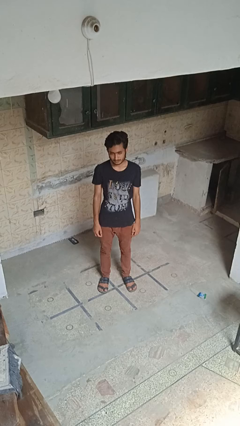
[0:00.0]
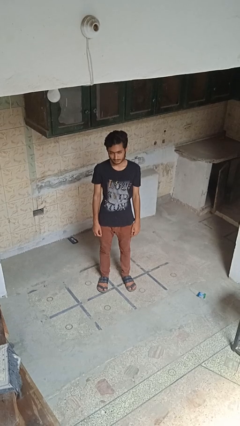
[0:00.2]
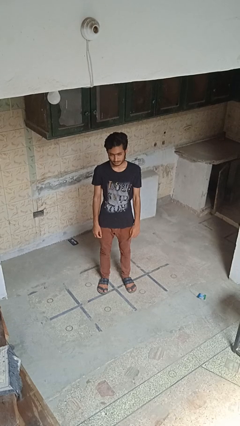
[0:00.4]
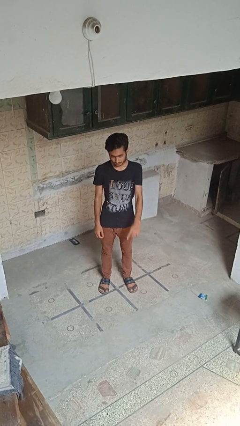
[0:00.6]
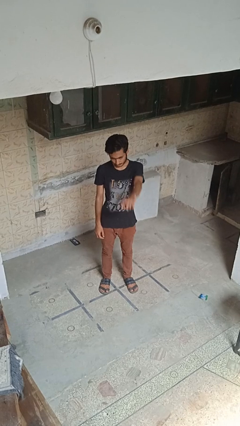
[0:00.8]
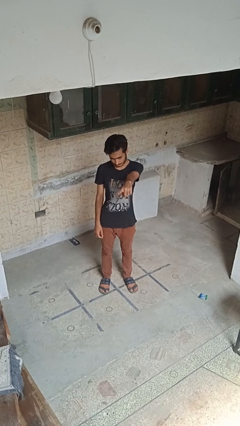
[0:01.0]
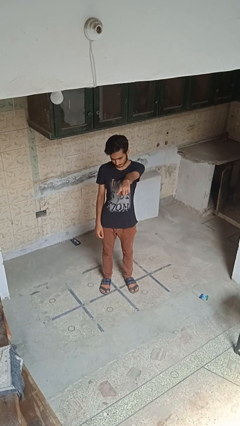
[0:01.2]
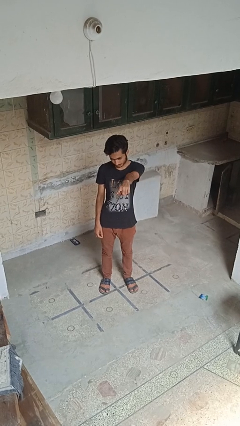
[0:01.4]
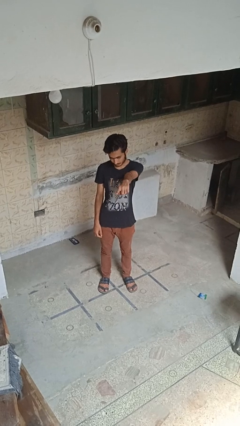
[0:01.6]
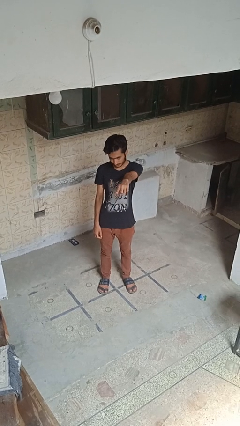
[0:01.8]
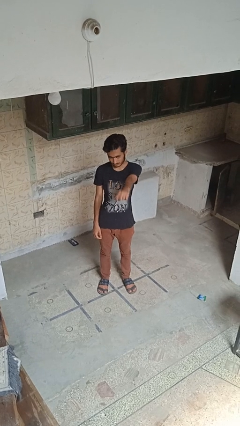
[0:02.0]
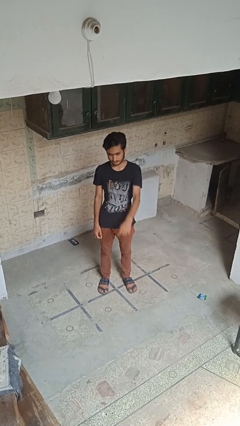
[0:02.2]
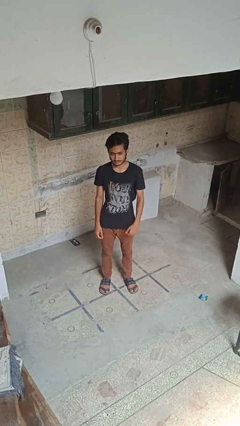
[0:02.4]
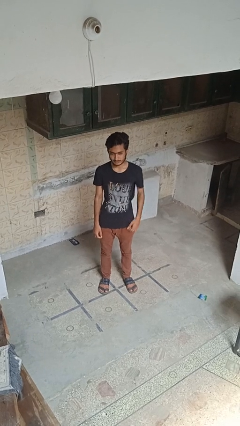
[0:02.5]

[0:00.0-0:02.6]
person points at person

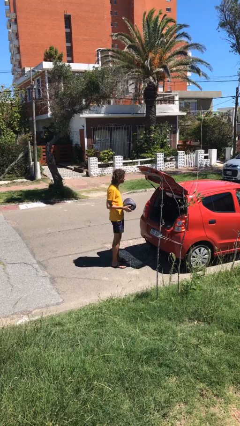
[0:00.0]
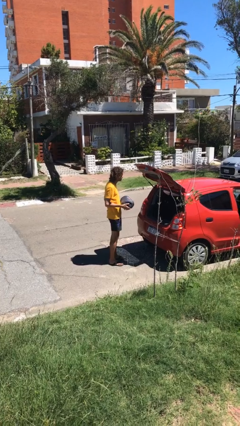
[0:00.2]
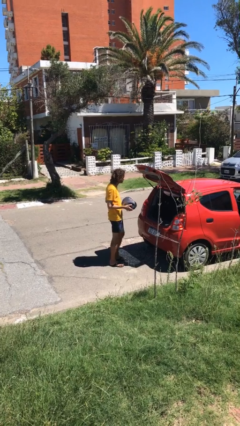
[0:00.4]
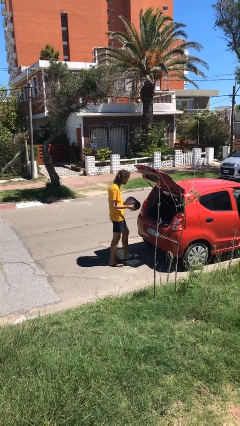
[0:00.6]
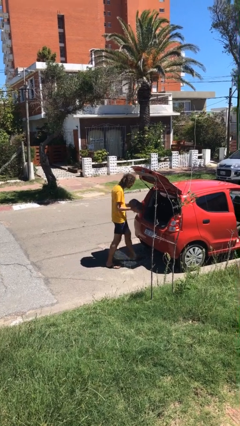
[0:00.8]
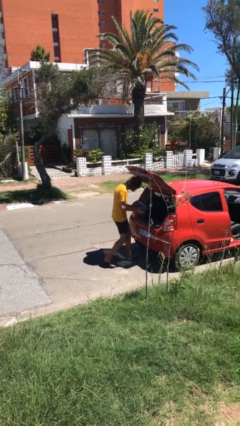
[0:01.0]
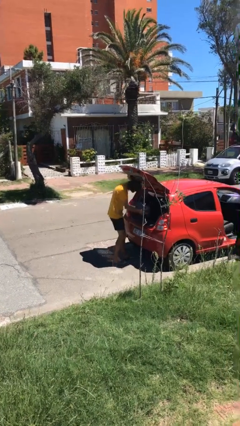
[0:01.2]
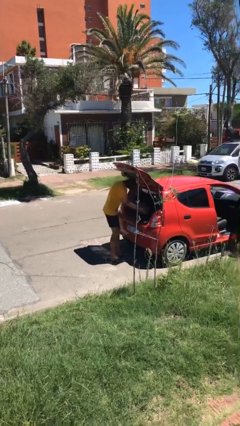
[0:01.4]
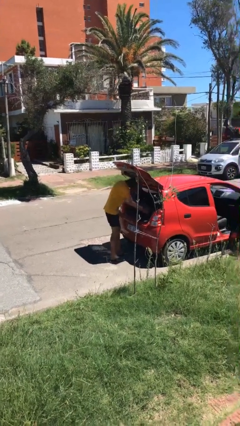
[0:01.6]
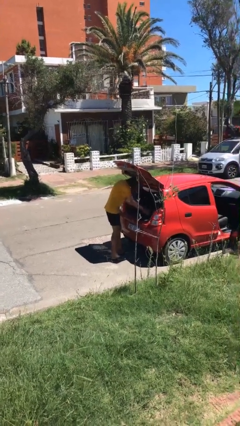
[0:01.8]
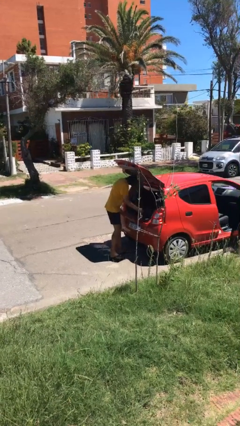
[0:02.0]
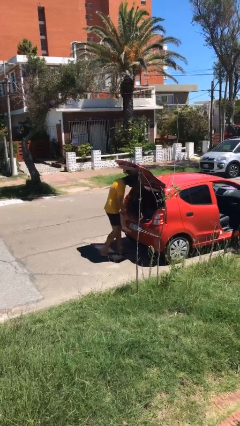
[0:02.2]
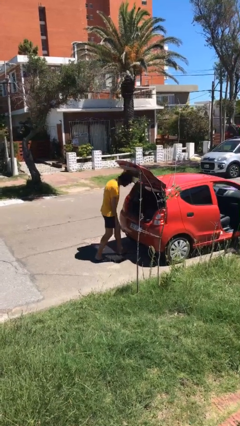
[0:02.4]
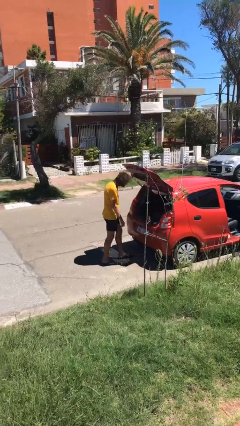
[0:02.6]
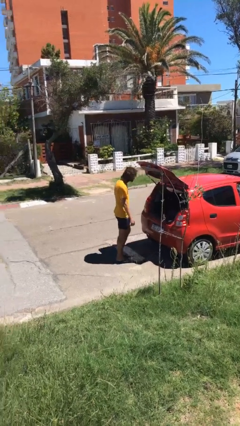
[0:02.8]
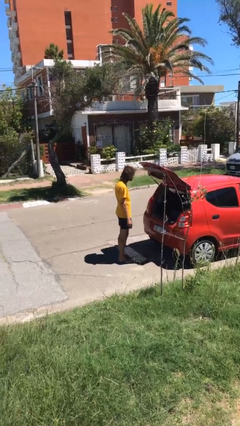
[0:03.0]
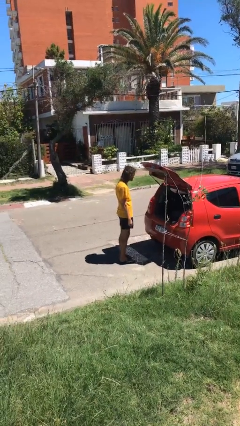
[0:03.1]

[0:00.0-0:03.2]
person loads car

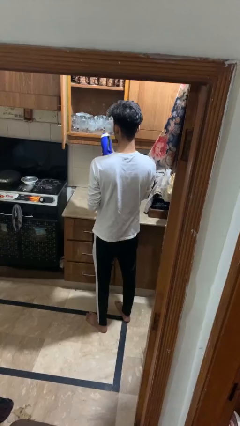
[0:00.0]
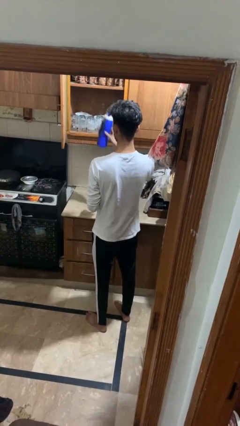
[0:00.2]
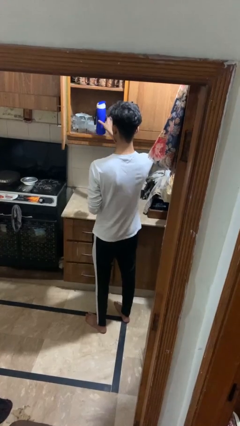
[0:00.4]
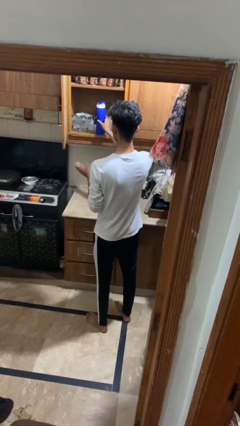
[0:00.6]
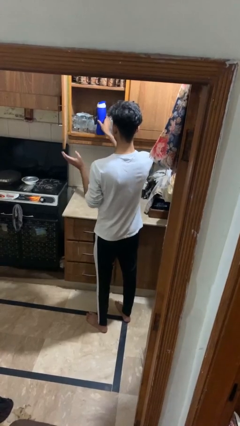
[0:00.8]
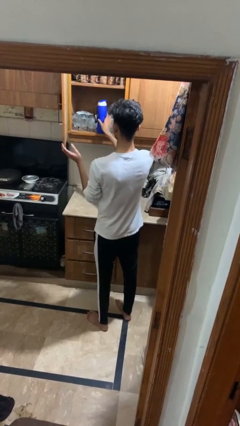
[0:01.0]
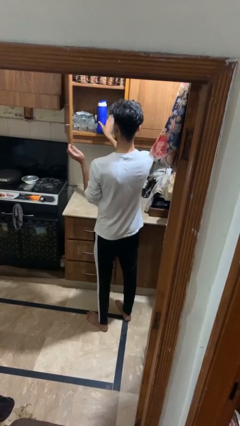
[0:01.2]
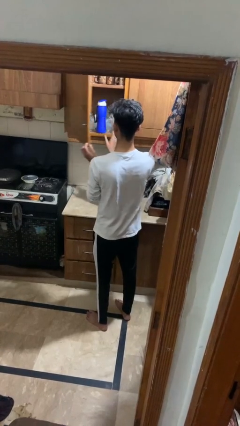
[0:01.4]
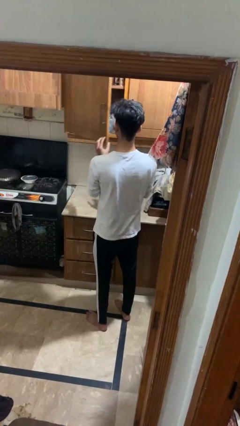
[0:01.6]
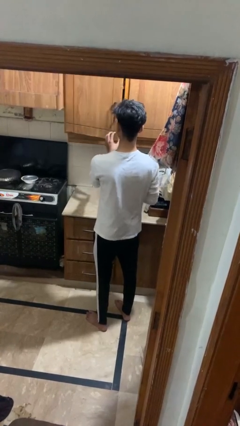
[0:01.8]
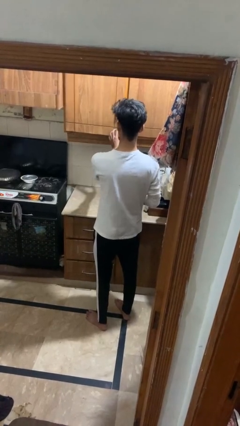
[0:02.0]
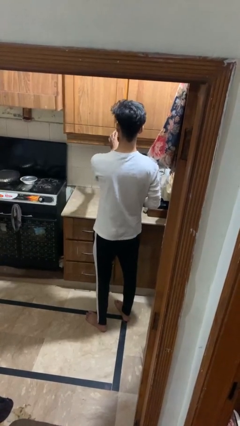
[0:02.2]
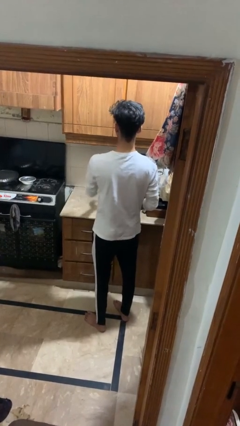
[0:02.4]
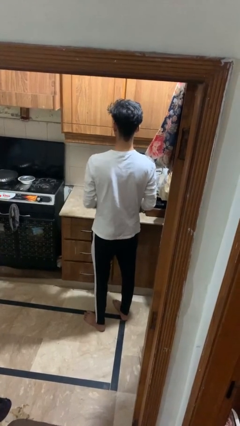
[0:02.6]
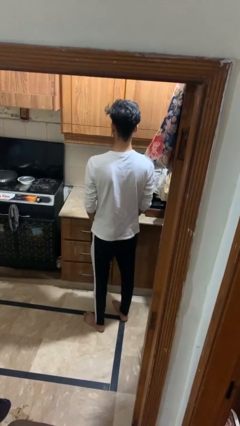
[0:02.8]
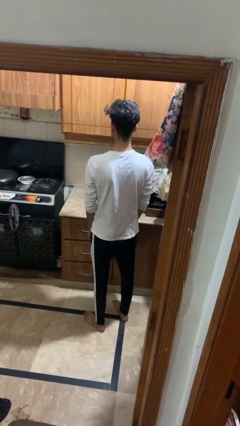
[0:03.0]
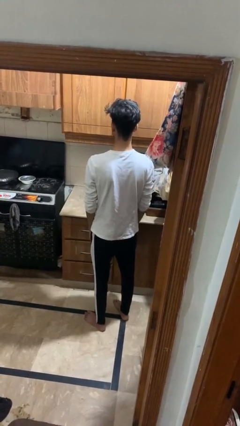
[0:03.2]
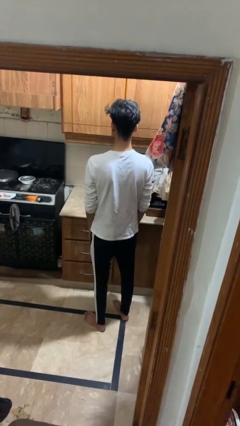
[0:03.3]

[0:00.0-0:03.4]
person takes object from cabinet

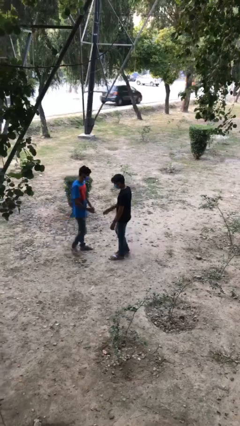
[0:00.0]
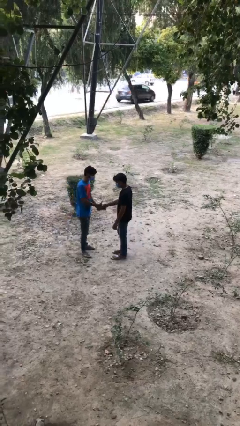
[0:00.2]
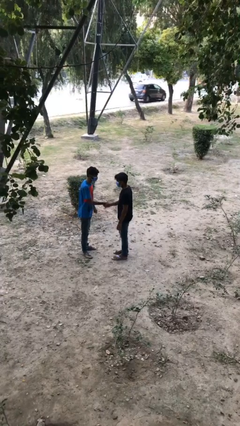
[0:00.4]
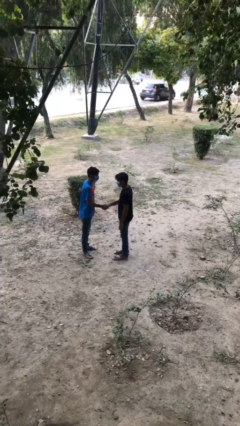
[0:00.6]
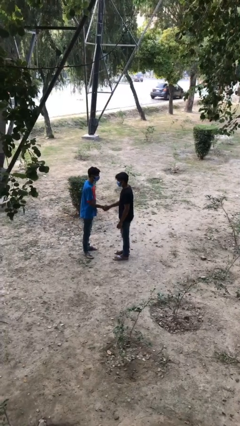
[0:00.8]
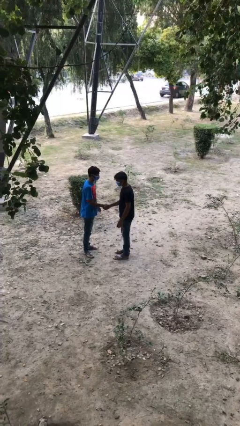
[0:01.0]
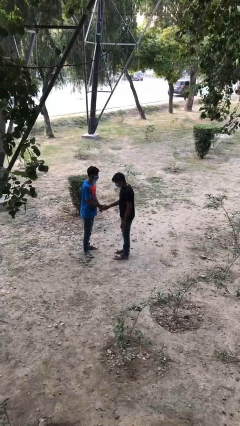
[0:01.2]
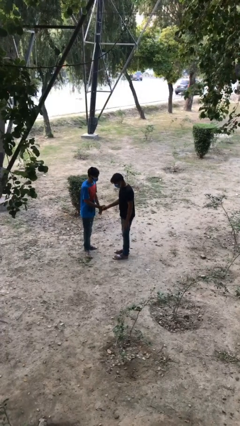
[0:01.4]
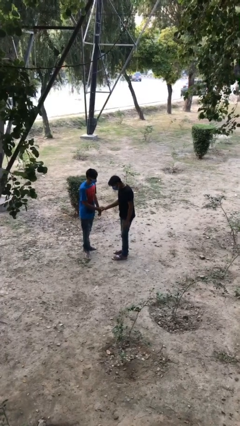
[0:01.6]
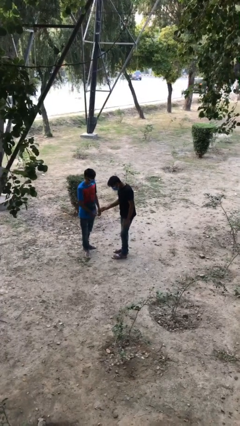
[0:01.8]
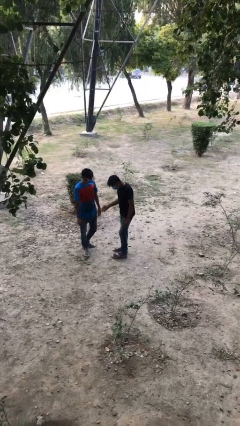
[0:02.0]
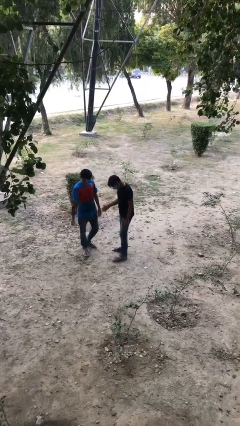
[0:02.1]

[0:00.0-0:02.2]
person shakes hand

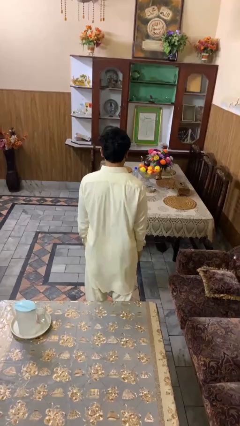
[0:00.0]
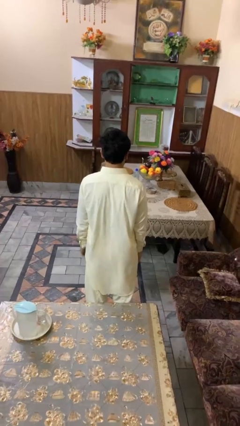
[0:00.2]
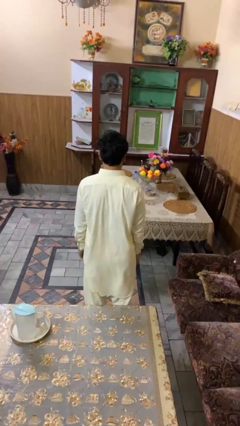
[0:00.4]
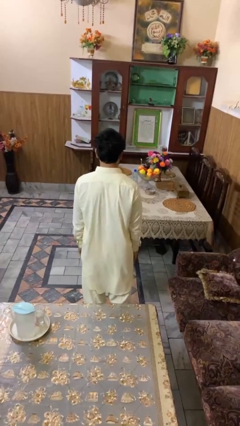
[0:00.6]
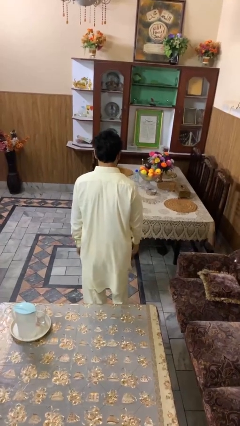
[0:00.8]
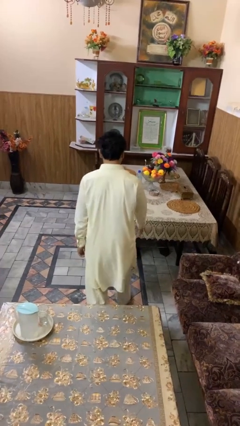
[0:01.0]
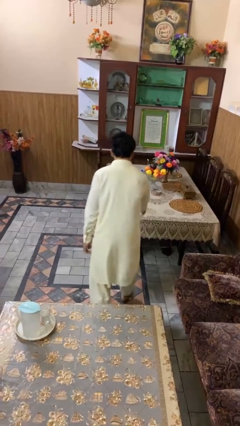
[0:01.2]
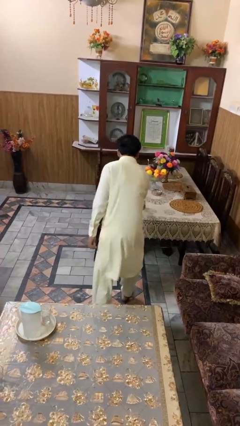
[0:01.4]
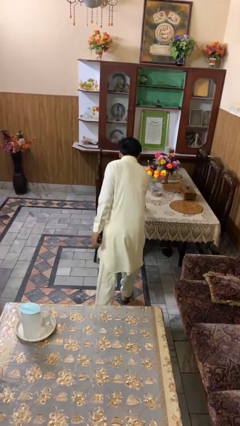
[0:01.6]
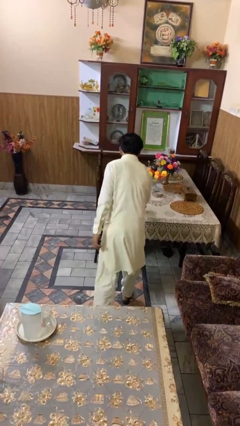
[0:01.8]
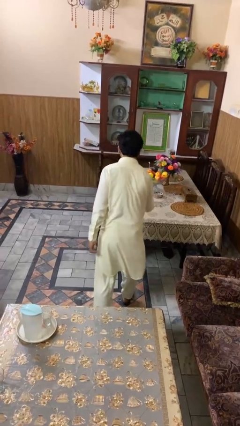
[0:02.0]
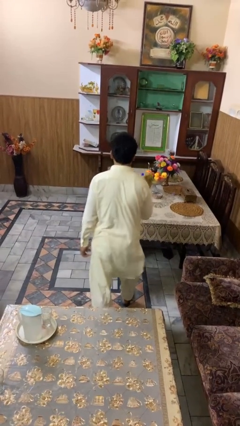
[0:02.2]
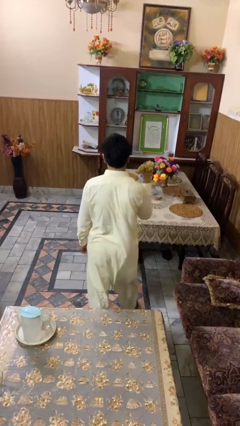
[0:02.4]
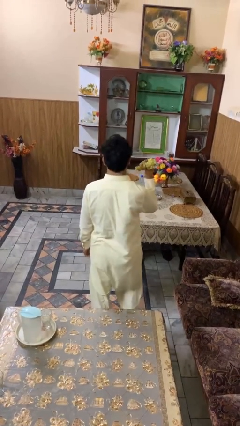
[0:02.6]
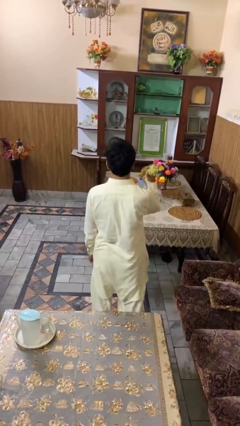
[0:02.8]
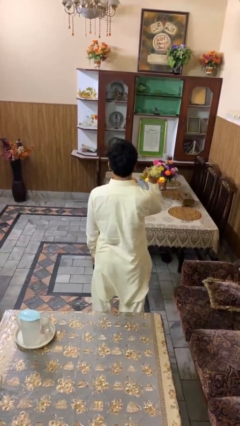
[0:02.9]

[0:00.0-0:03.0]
person picks up object from table

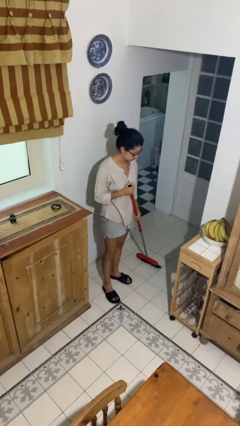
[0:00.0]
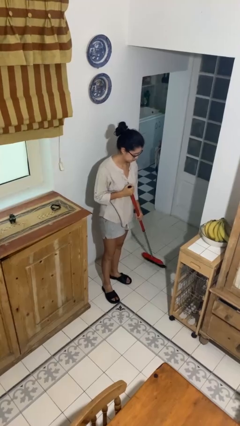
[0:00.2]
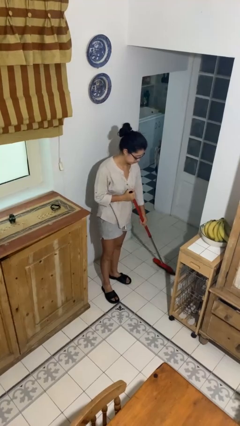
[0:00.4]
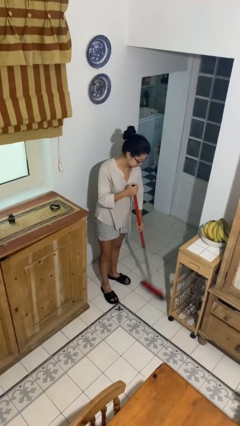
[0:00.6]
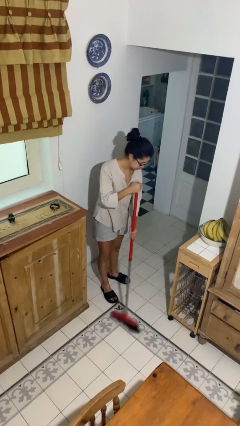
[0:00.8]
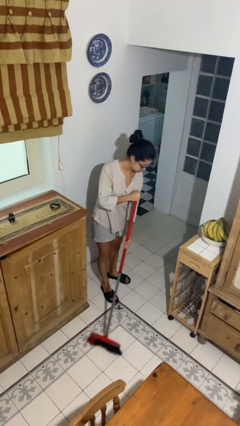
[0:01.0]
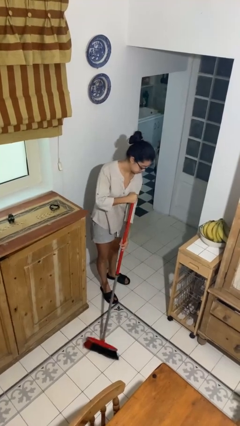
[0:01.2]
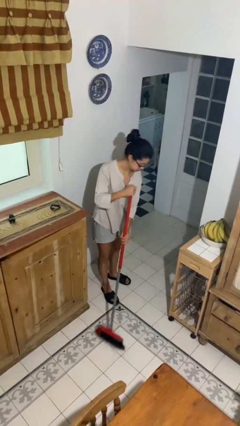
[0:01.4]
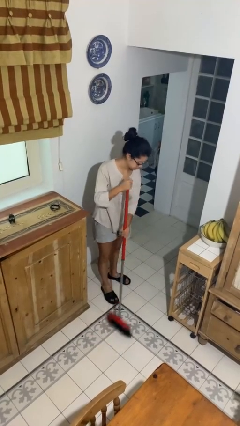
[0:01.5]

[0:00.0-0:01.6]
person sweeps floor

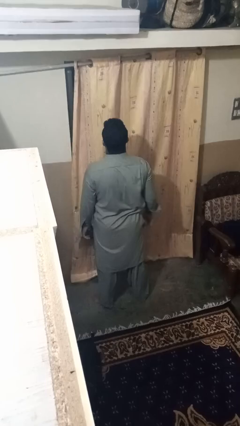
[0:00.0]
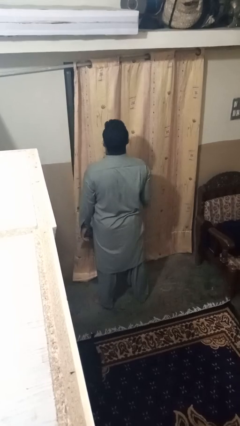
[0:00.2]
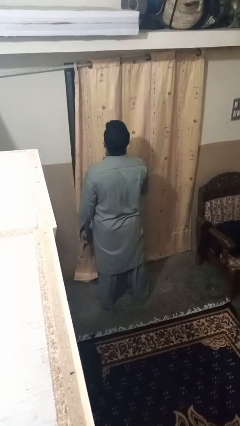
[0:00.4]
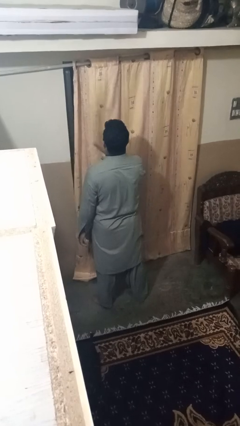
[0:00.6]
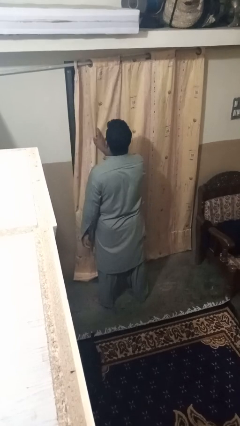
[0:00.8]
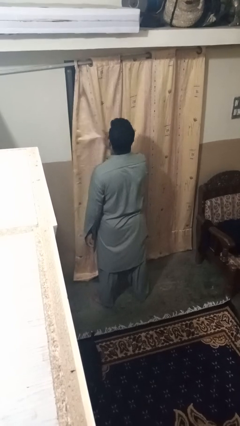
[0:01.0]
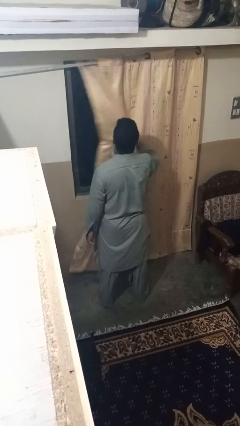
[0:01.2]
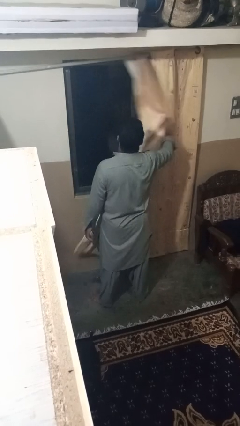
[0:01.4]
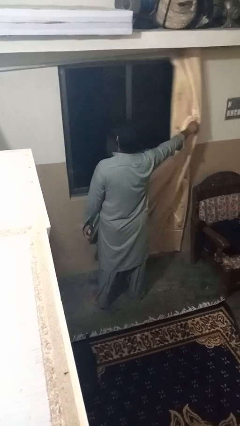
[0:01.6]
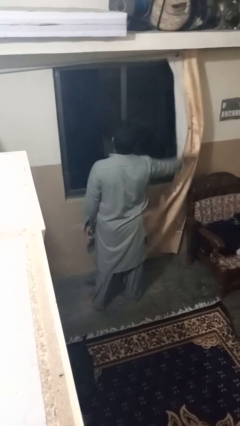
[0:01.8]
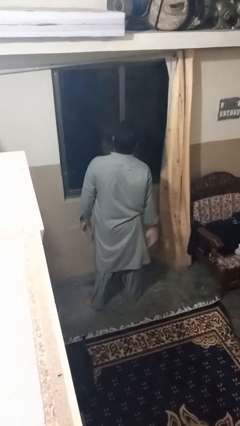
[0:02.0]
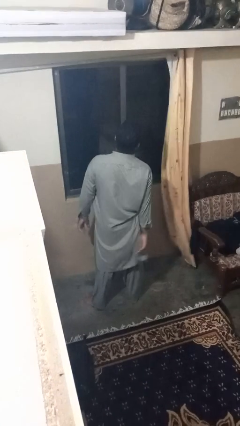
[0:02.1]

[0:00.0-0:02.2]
person opens curtains
